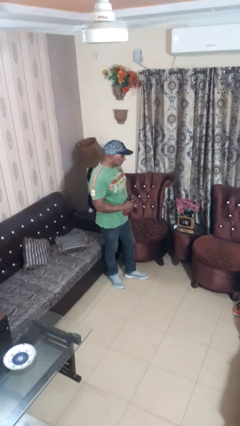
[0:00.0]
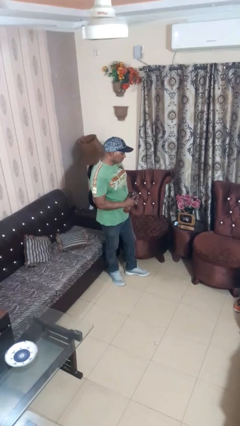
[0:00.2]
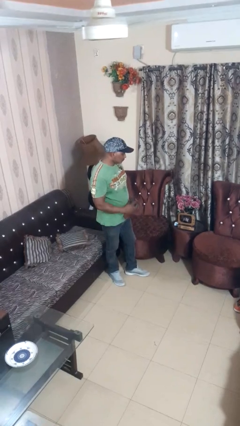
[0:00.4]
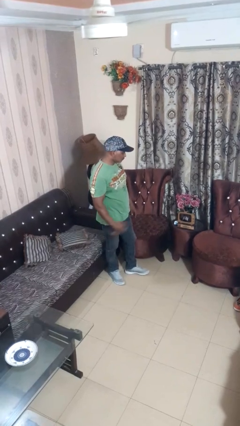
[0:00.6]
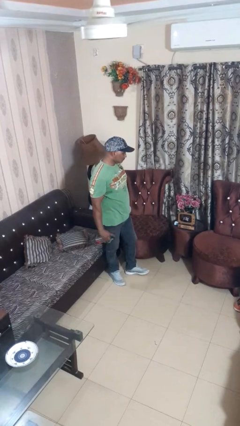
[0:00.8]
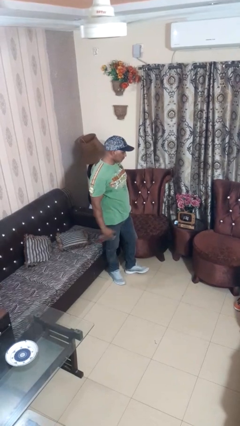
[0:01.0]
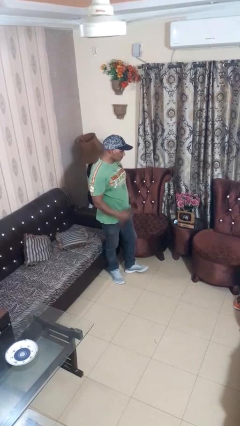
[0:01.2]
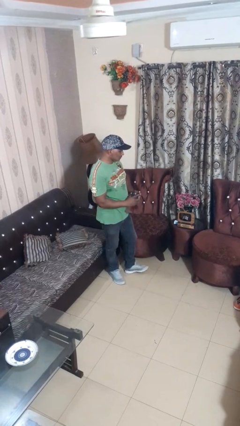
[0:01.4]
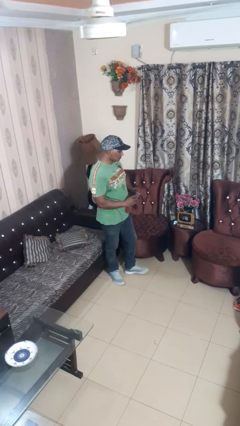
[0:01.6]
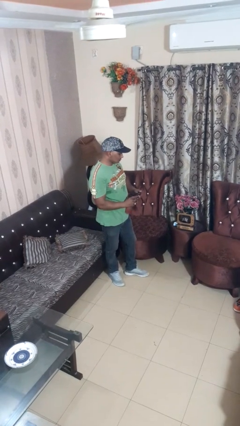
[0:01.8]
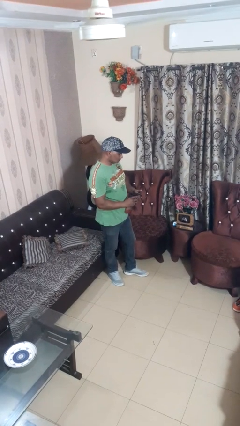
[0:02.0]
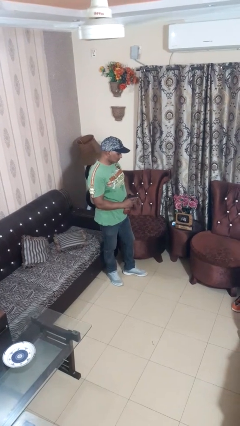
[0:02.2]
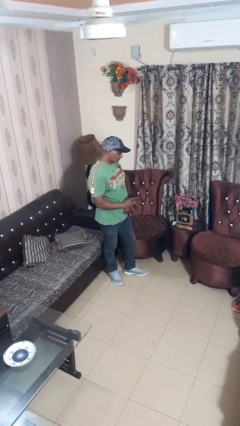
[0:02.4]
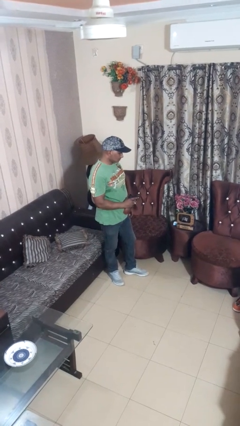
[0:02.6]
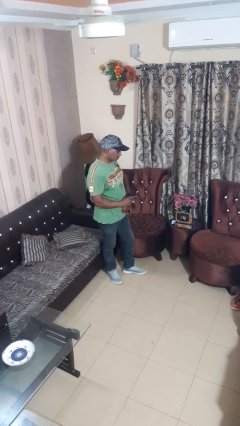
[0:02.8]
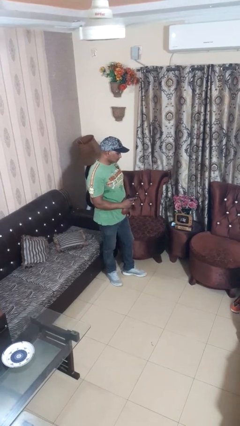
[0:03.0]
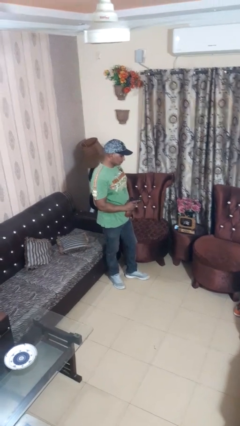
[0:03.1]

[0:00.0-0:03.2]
person opens beverage can

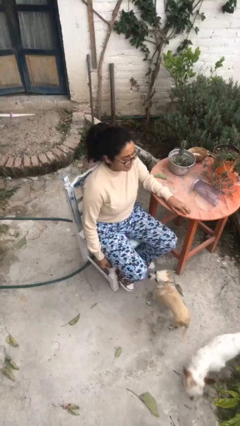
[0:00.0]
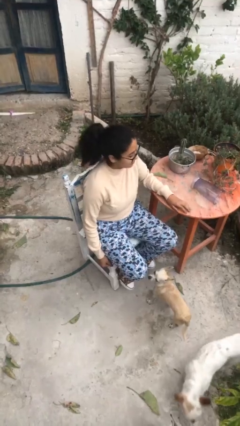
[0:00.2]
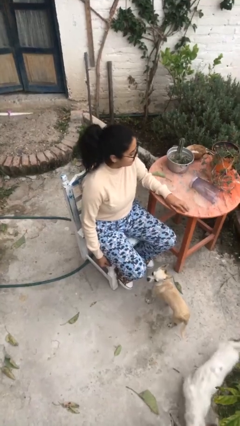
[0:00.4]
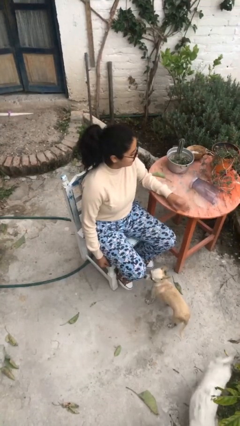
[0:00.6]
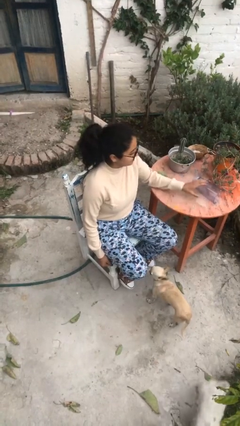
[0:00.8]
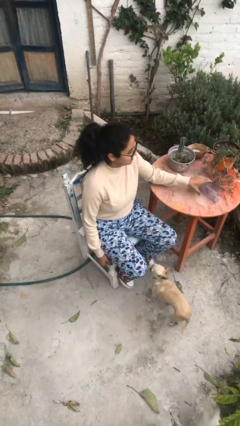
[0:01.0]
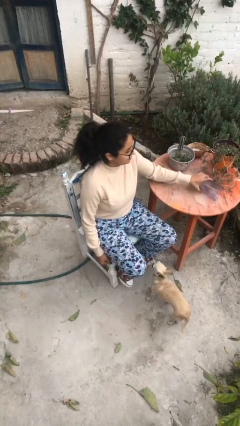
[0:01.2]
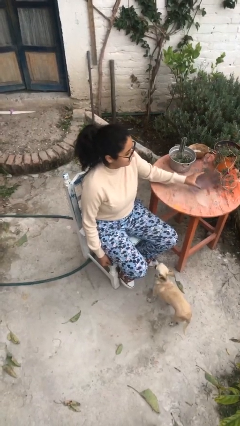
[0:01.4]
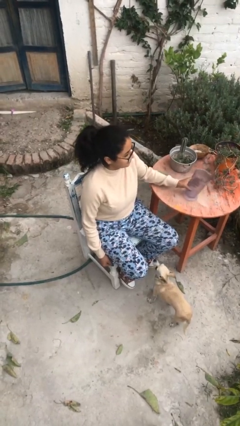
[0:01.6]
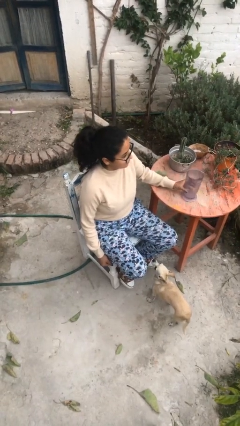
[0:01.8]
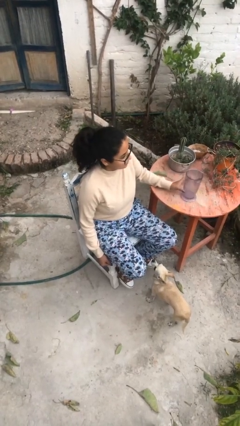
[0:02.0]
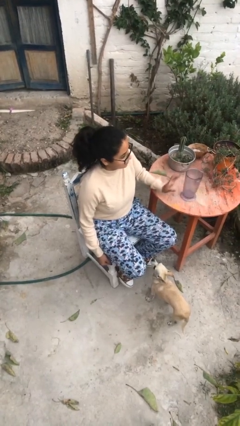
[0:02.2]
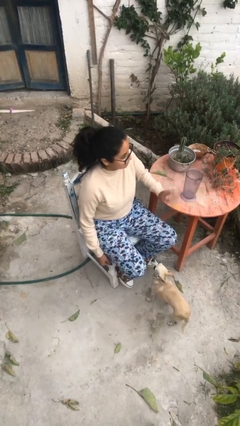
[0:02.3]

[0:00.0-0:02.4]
person sets upright glass

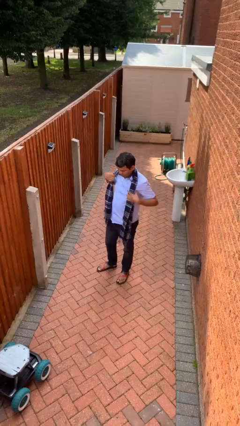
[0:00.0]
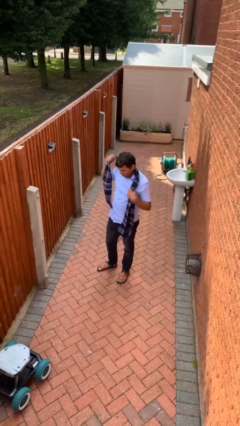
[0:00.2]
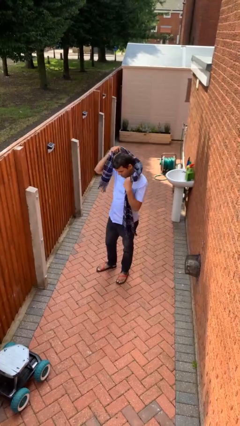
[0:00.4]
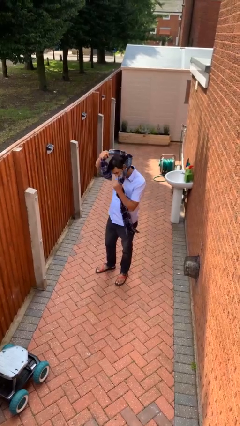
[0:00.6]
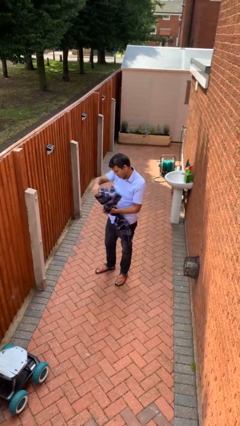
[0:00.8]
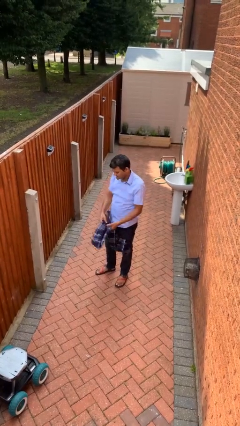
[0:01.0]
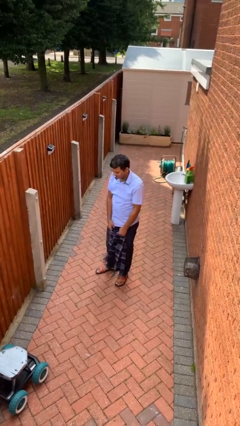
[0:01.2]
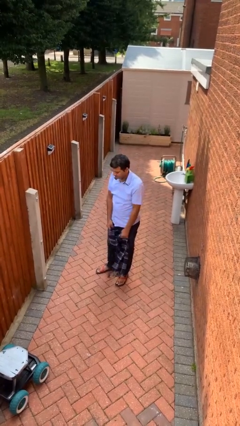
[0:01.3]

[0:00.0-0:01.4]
person takes off scarf

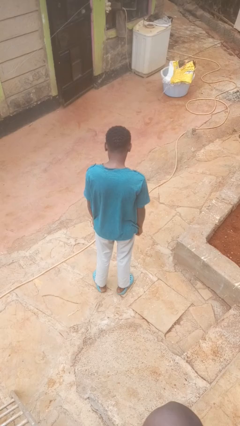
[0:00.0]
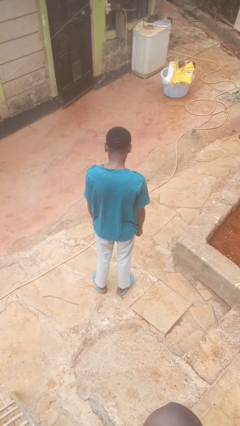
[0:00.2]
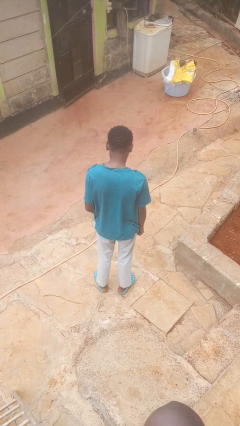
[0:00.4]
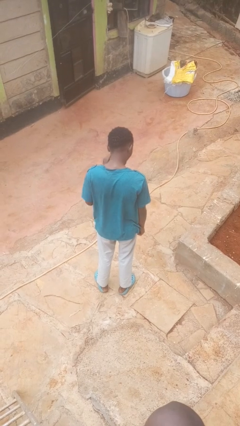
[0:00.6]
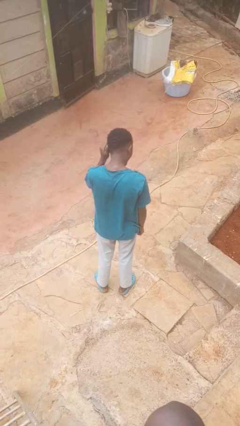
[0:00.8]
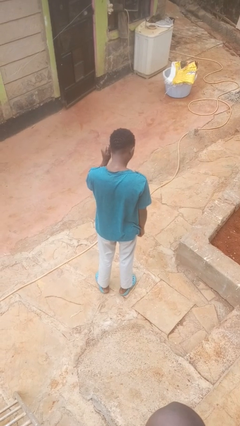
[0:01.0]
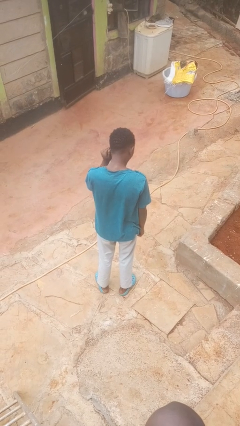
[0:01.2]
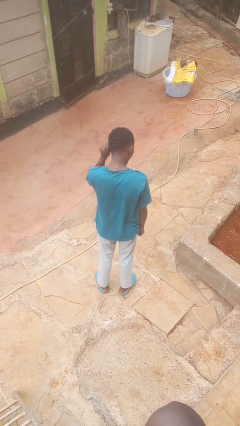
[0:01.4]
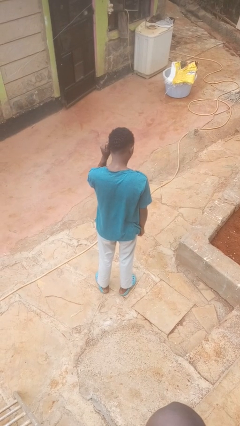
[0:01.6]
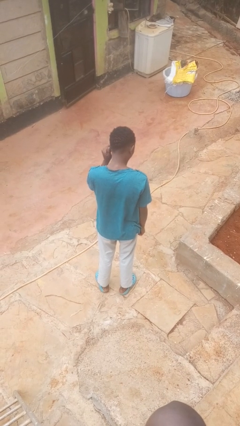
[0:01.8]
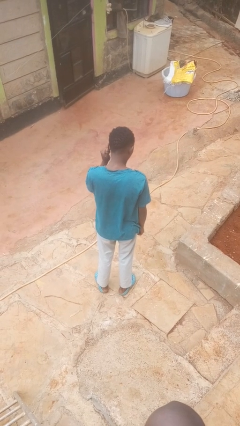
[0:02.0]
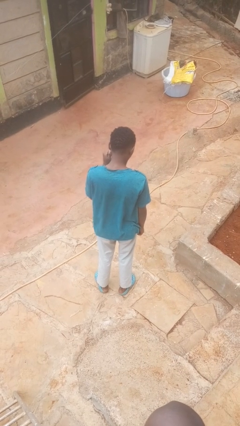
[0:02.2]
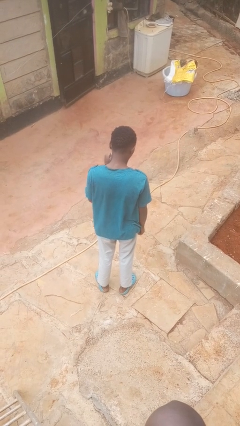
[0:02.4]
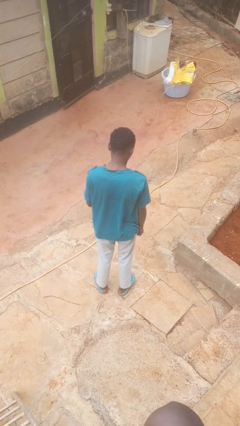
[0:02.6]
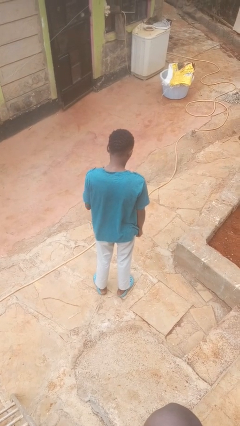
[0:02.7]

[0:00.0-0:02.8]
person touches earlobe

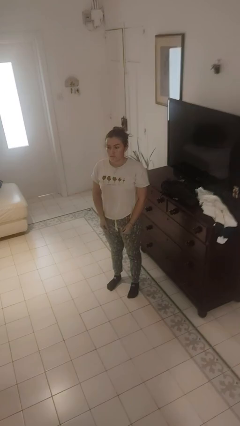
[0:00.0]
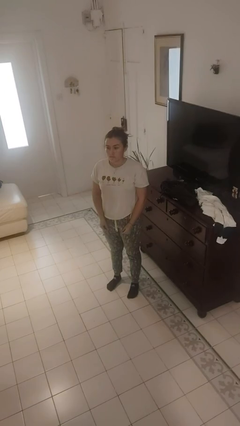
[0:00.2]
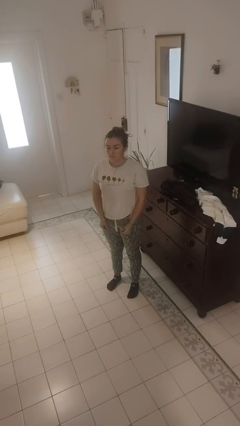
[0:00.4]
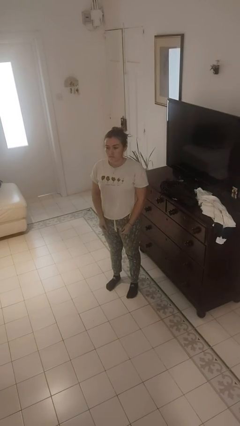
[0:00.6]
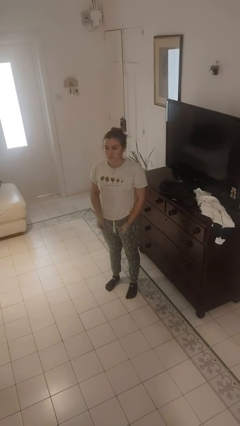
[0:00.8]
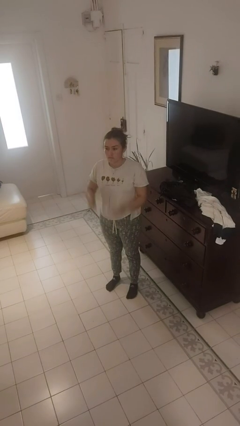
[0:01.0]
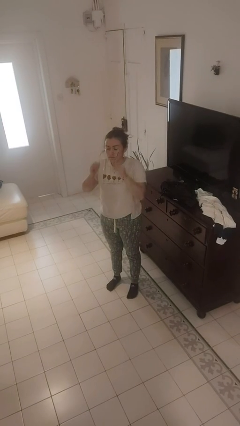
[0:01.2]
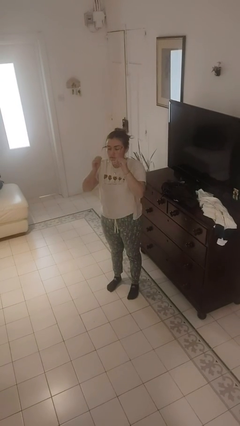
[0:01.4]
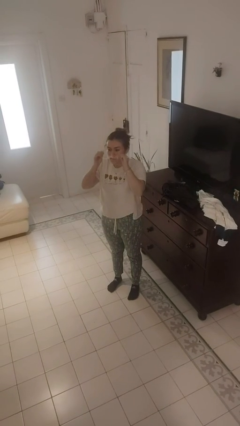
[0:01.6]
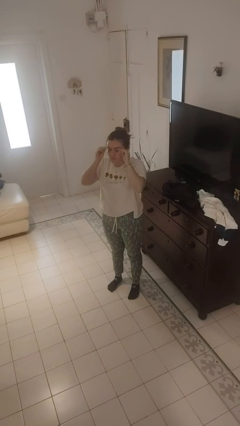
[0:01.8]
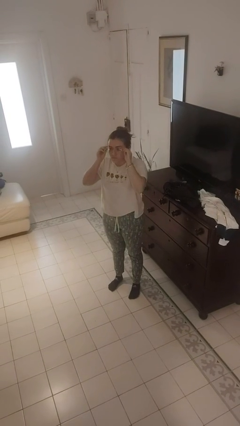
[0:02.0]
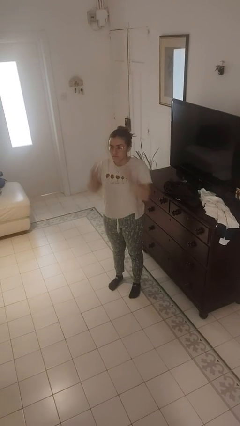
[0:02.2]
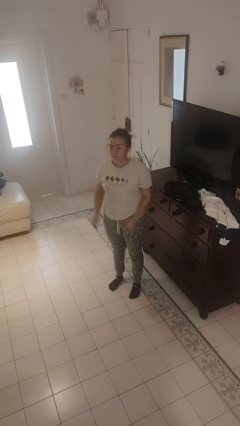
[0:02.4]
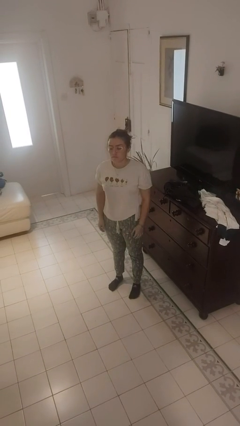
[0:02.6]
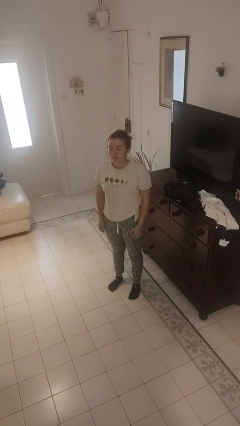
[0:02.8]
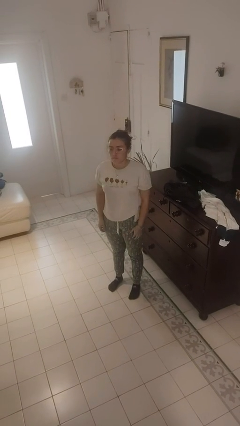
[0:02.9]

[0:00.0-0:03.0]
person puts on glasses

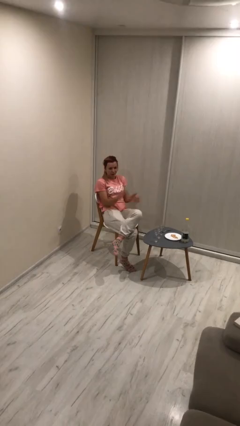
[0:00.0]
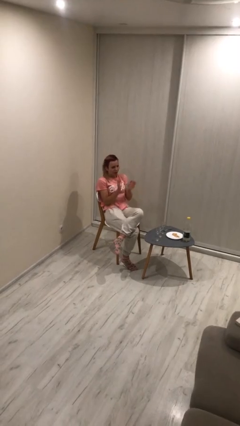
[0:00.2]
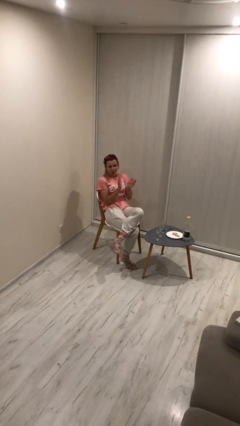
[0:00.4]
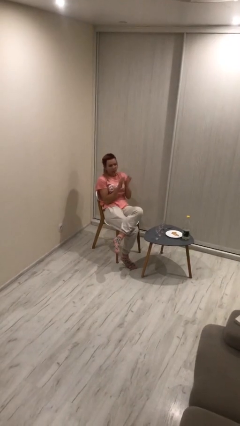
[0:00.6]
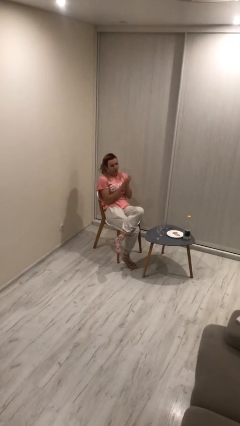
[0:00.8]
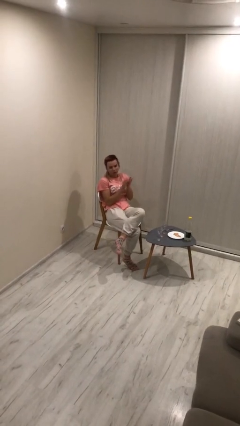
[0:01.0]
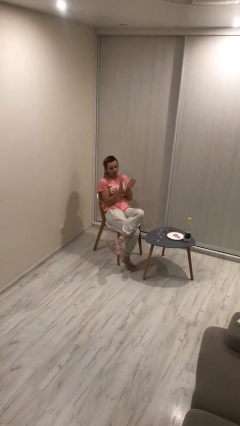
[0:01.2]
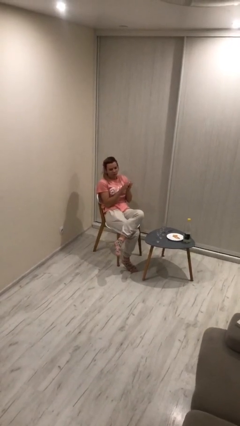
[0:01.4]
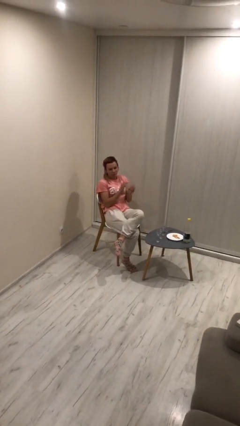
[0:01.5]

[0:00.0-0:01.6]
person claps hands

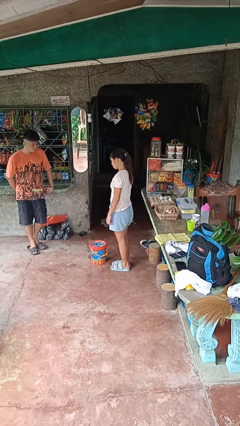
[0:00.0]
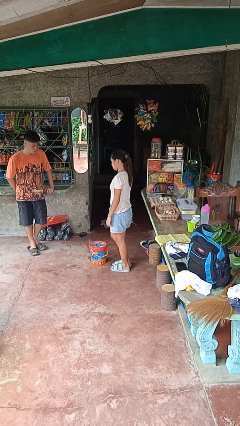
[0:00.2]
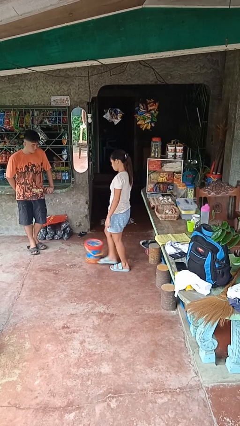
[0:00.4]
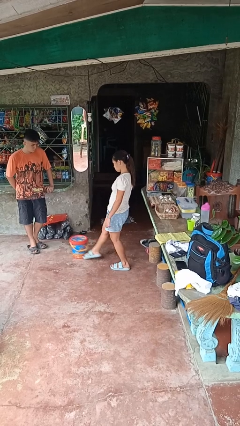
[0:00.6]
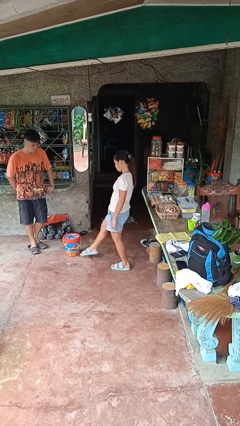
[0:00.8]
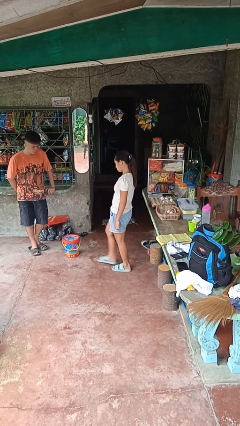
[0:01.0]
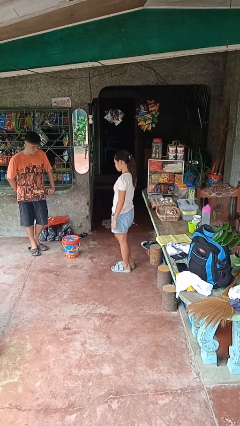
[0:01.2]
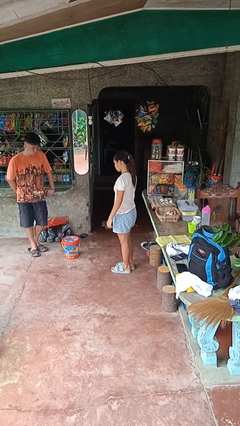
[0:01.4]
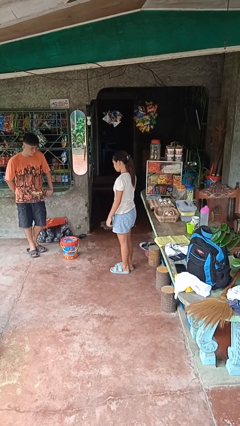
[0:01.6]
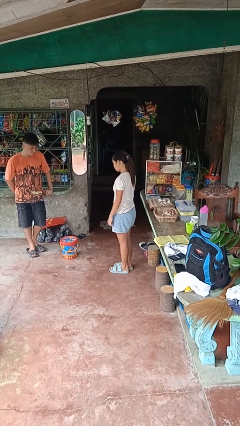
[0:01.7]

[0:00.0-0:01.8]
person kicks object to person

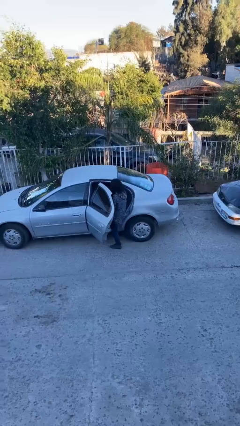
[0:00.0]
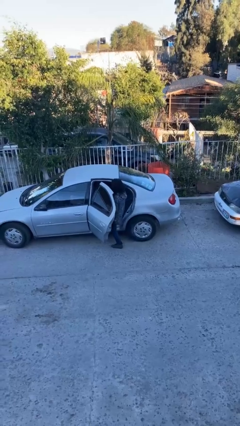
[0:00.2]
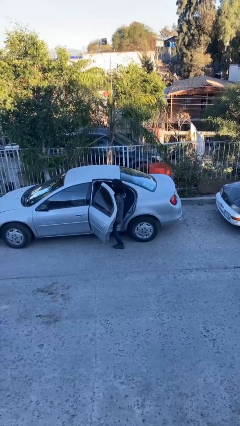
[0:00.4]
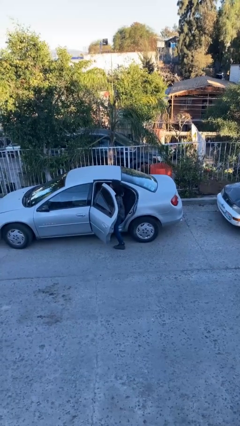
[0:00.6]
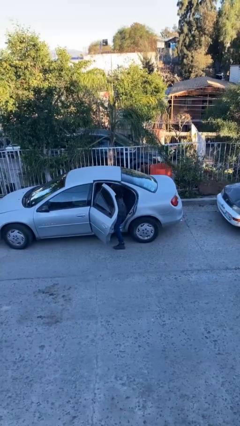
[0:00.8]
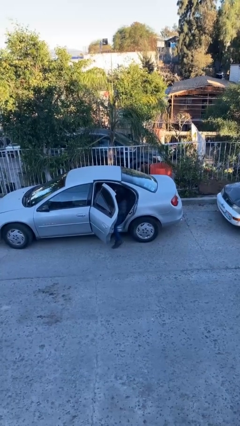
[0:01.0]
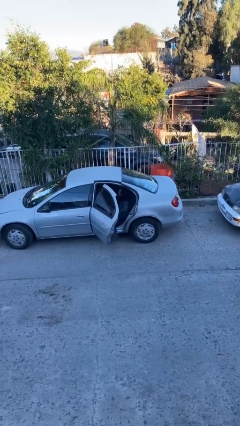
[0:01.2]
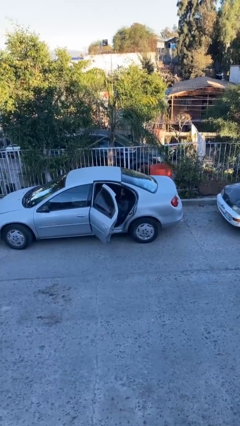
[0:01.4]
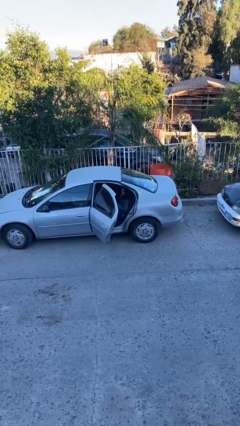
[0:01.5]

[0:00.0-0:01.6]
person enters car
